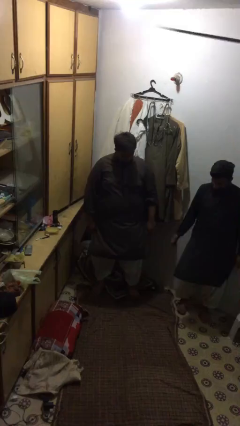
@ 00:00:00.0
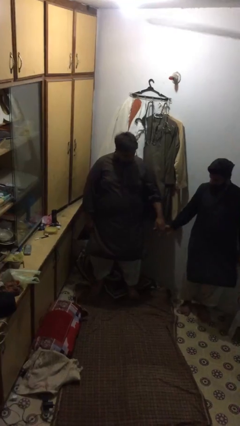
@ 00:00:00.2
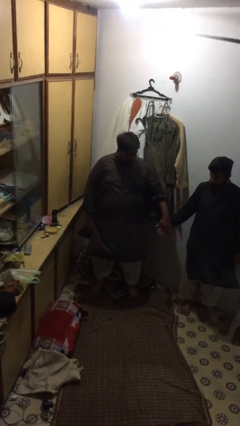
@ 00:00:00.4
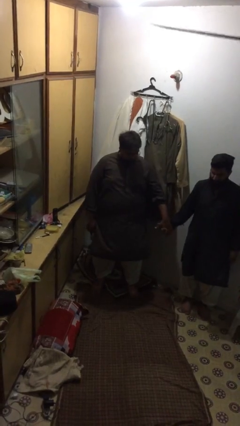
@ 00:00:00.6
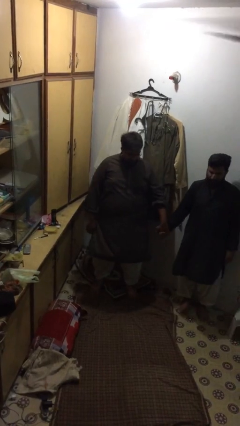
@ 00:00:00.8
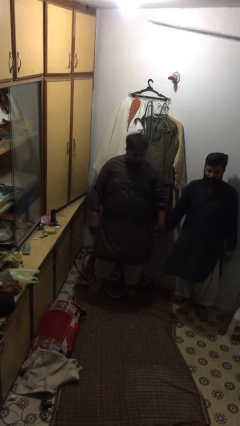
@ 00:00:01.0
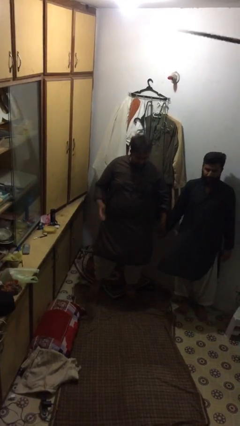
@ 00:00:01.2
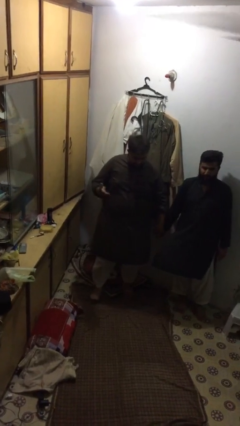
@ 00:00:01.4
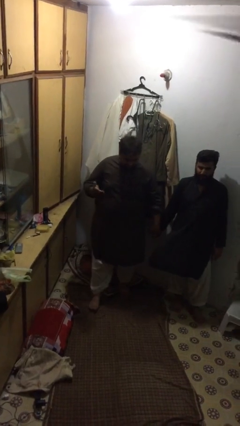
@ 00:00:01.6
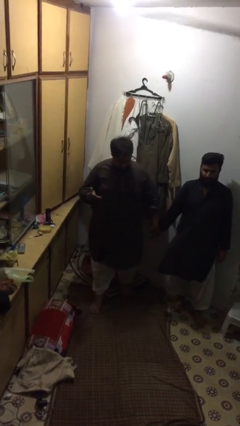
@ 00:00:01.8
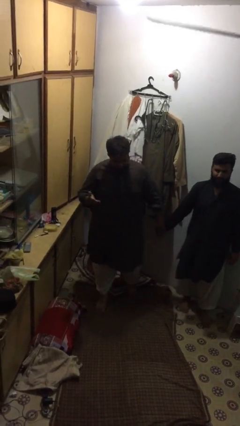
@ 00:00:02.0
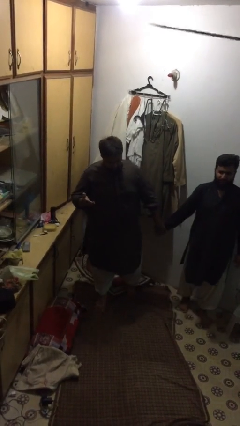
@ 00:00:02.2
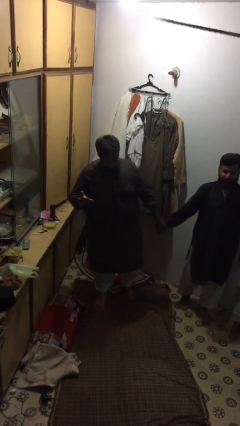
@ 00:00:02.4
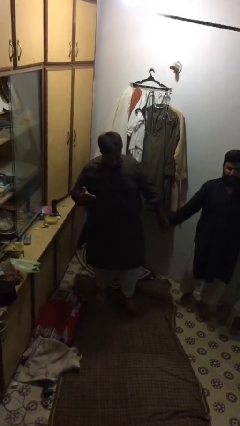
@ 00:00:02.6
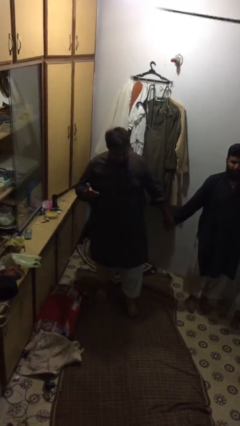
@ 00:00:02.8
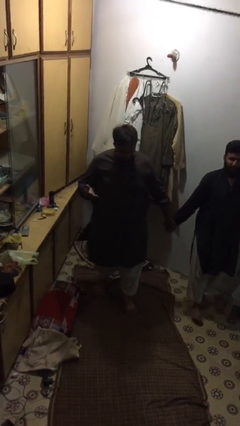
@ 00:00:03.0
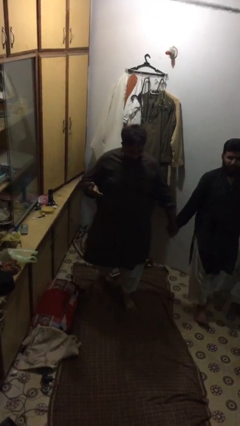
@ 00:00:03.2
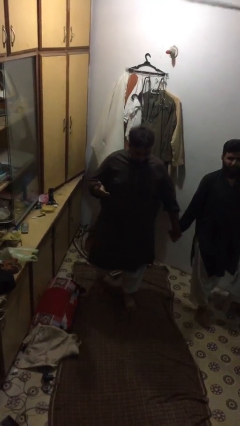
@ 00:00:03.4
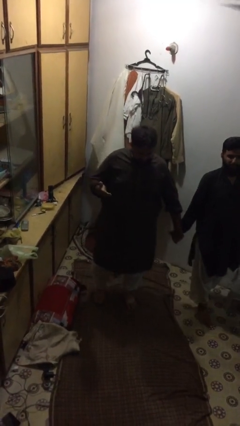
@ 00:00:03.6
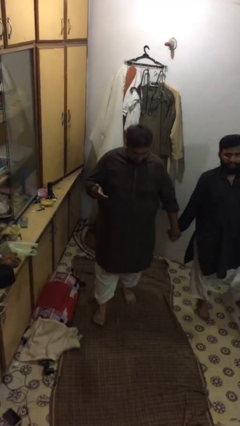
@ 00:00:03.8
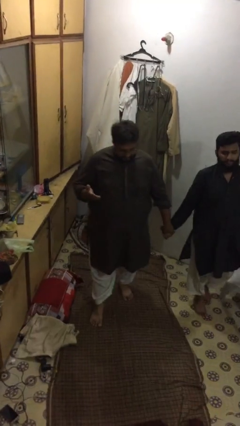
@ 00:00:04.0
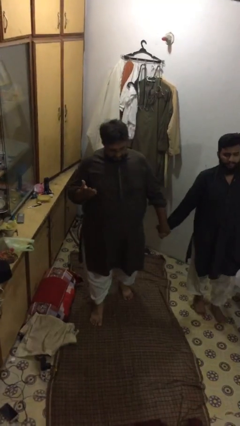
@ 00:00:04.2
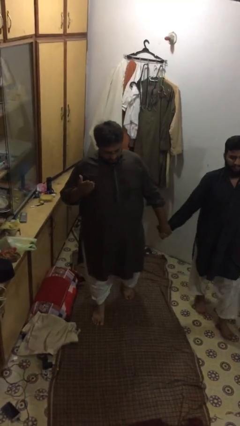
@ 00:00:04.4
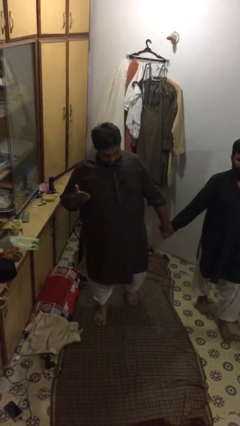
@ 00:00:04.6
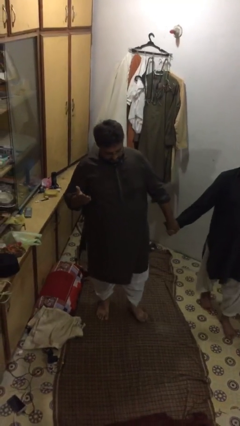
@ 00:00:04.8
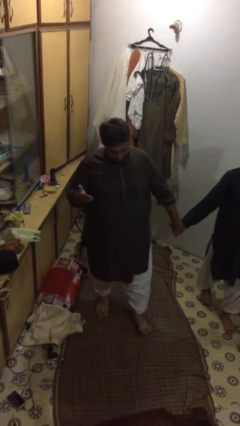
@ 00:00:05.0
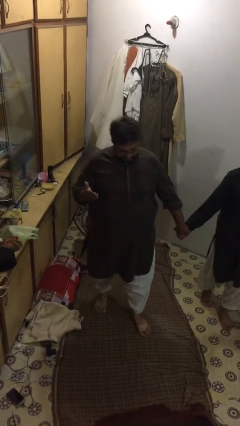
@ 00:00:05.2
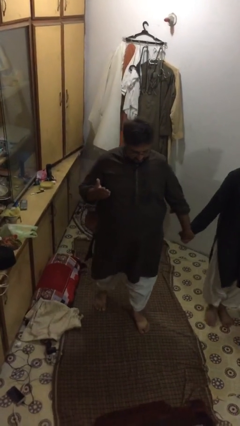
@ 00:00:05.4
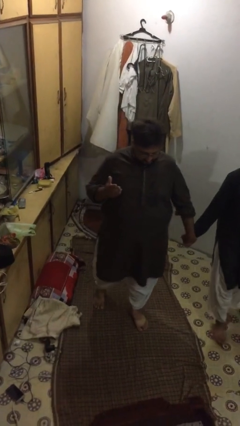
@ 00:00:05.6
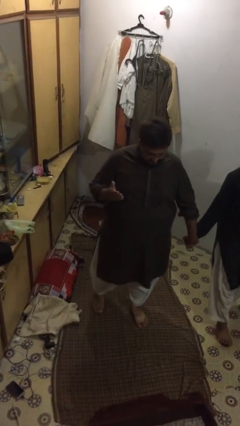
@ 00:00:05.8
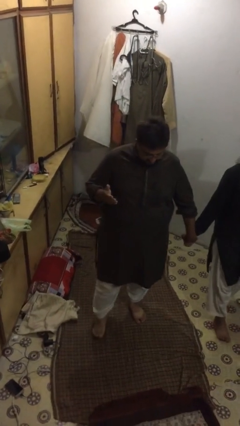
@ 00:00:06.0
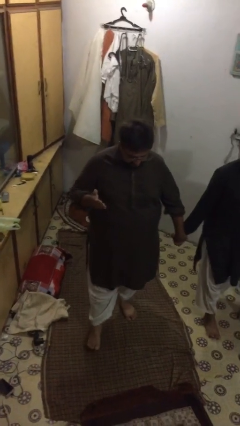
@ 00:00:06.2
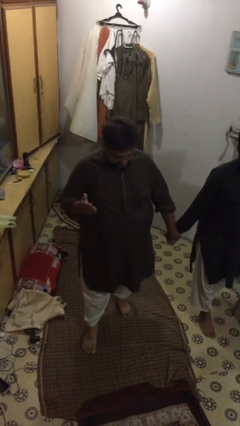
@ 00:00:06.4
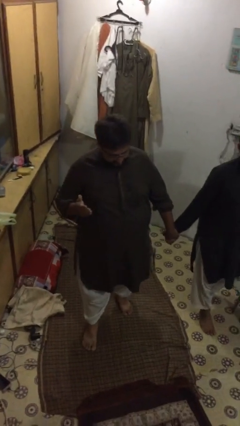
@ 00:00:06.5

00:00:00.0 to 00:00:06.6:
person holds hand

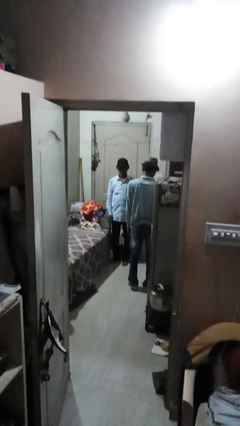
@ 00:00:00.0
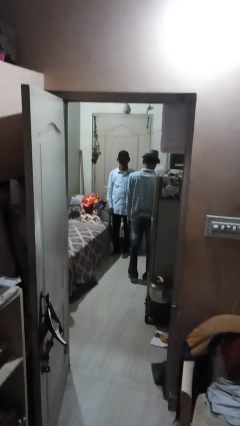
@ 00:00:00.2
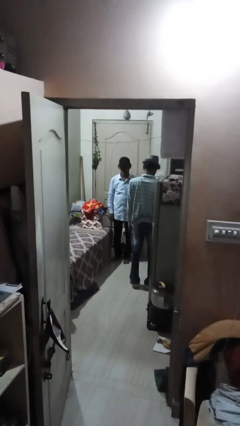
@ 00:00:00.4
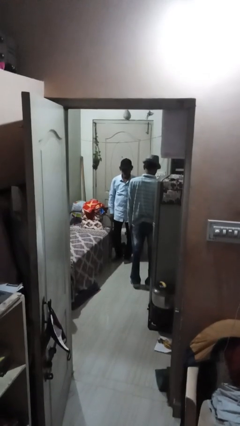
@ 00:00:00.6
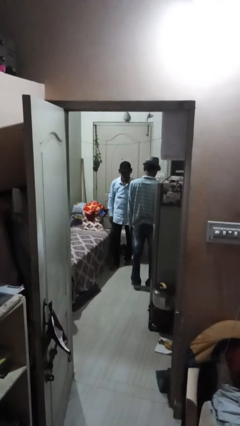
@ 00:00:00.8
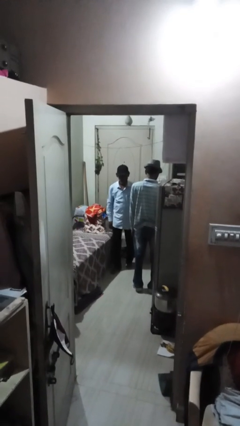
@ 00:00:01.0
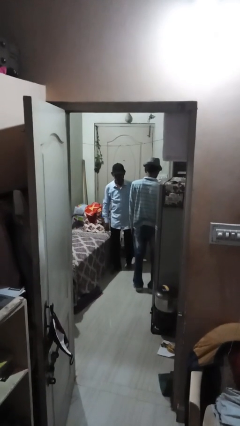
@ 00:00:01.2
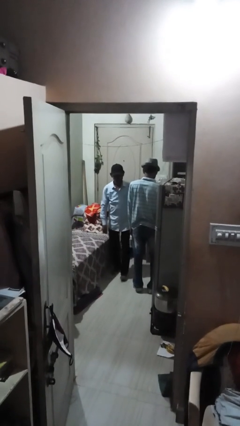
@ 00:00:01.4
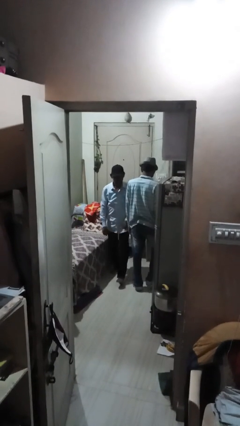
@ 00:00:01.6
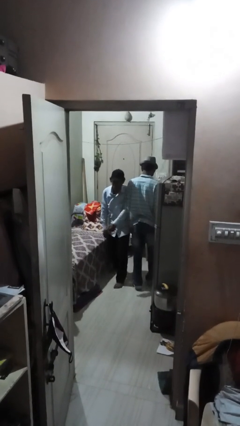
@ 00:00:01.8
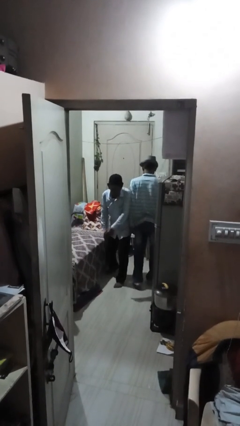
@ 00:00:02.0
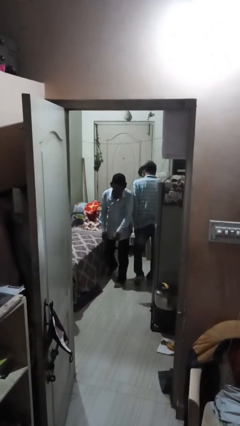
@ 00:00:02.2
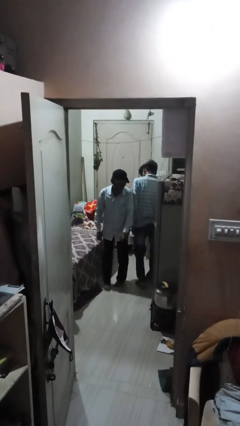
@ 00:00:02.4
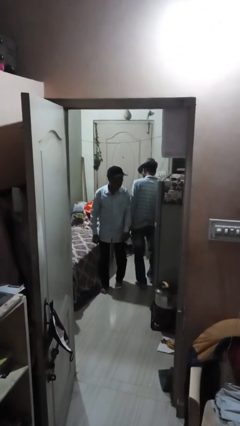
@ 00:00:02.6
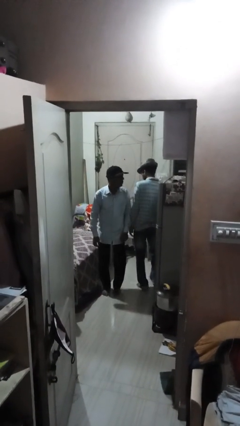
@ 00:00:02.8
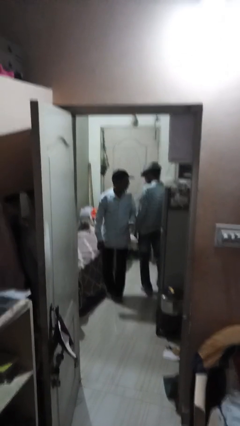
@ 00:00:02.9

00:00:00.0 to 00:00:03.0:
person bumps into person

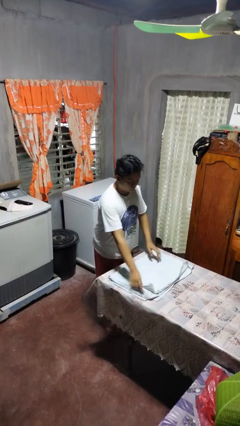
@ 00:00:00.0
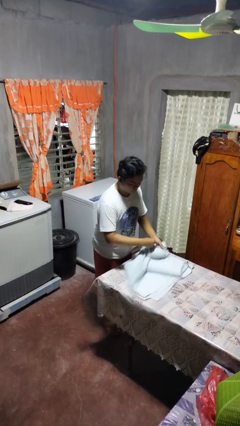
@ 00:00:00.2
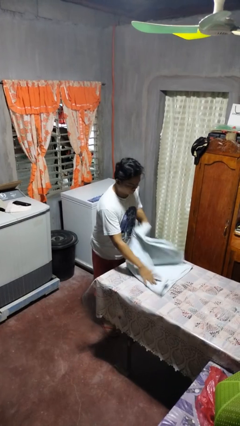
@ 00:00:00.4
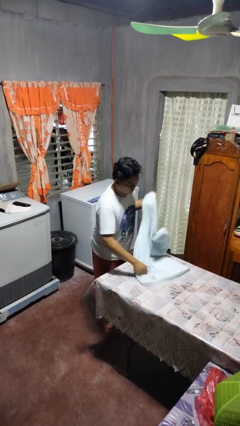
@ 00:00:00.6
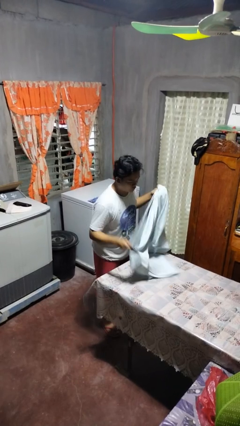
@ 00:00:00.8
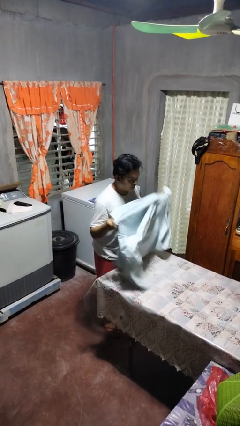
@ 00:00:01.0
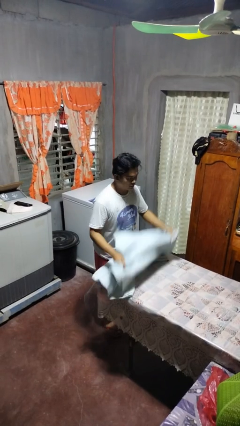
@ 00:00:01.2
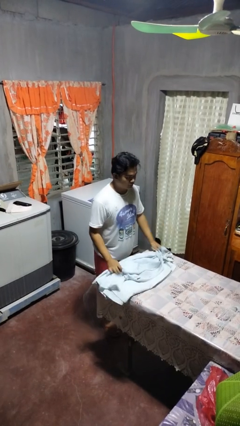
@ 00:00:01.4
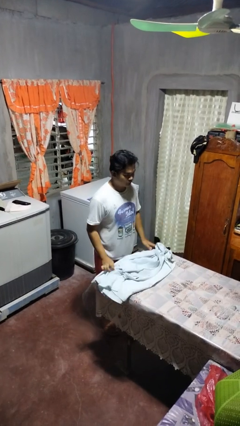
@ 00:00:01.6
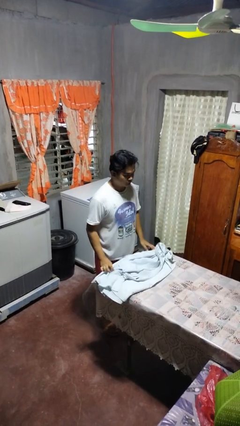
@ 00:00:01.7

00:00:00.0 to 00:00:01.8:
person unfolds blanket

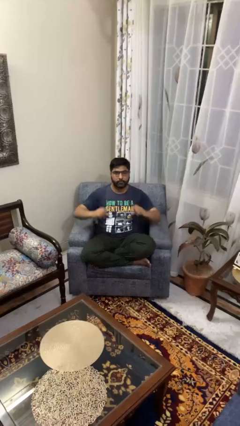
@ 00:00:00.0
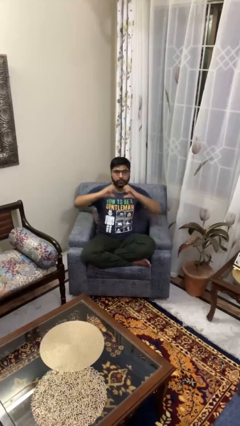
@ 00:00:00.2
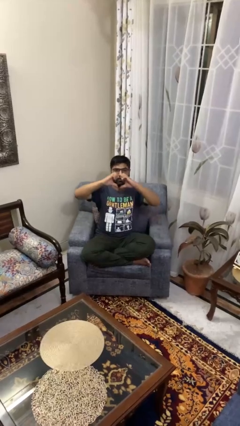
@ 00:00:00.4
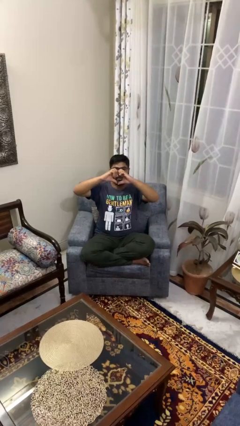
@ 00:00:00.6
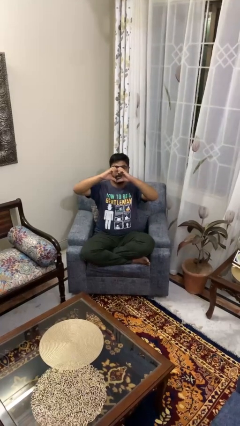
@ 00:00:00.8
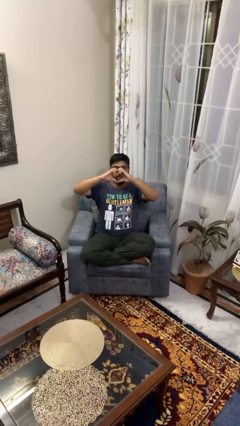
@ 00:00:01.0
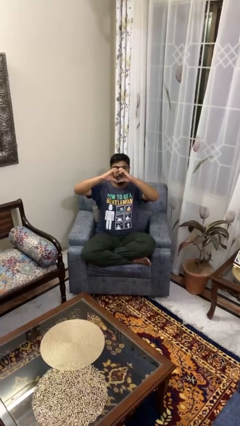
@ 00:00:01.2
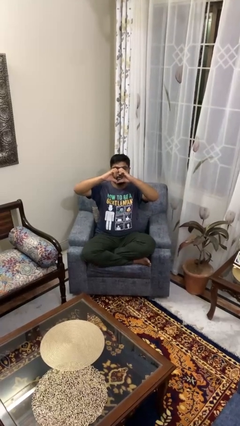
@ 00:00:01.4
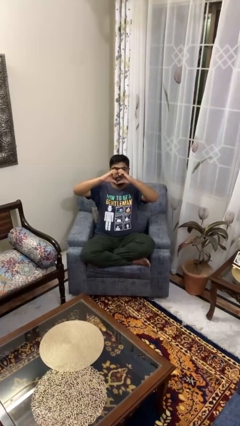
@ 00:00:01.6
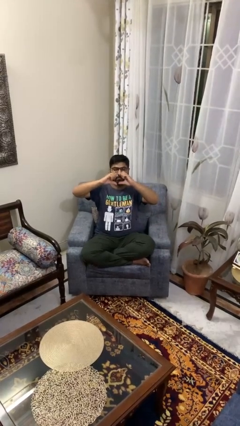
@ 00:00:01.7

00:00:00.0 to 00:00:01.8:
person gestures heart

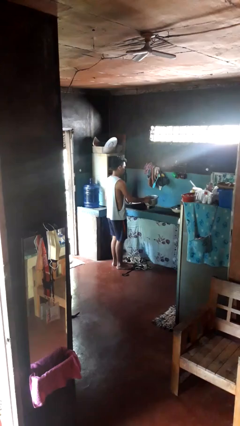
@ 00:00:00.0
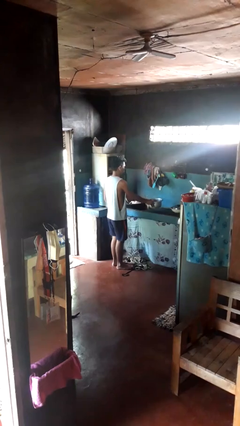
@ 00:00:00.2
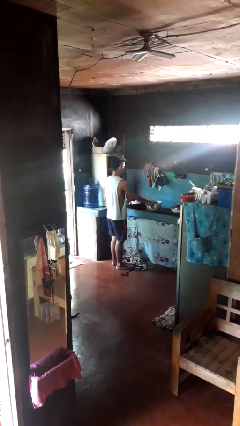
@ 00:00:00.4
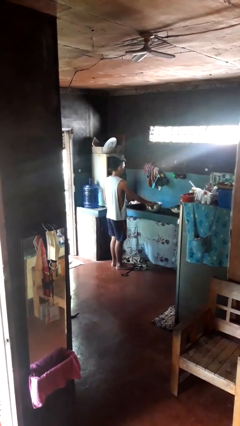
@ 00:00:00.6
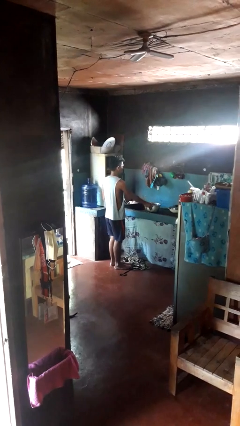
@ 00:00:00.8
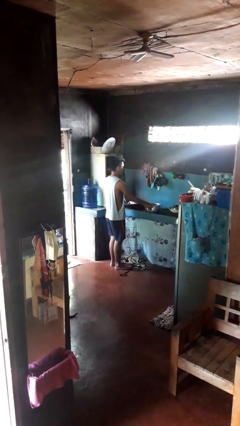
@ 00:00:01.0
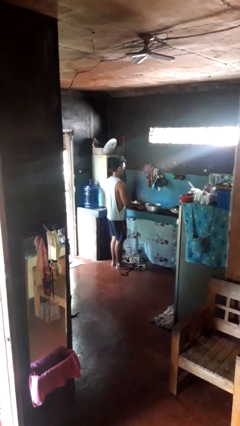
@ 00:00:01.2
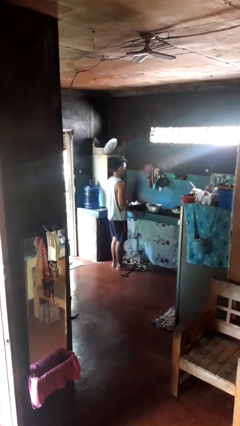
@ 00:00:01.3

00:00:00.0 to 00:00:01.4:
person puts down object on countertop

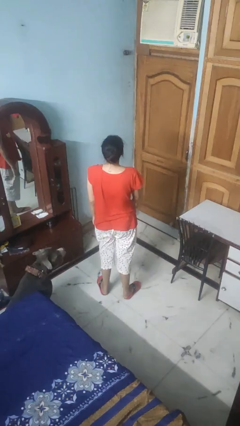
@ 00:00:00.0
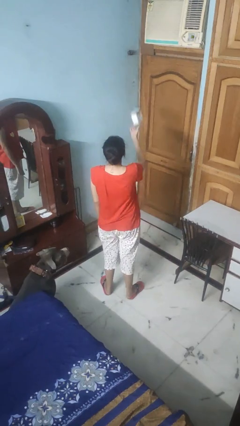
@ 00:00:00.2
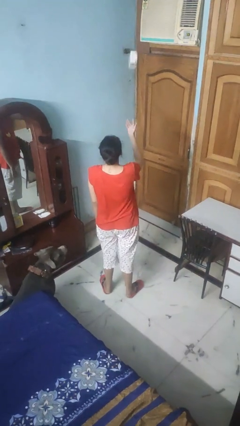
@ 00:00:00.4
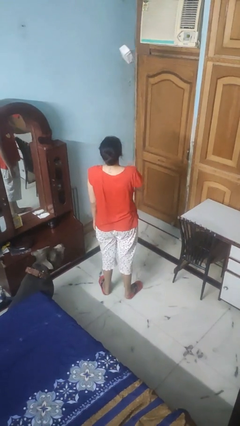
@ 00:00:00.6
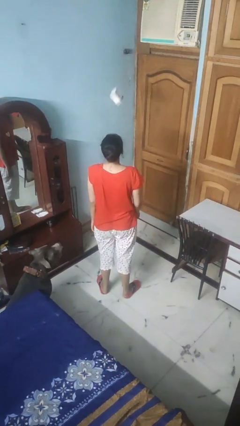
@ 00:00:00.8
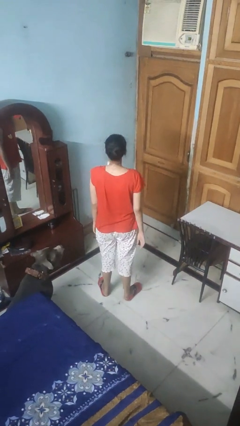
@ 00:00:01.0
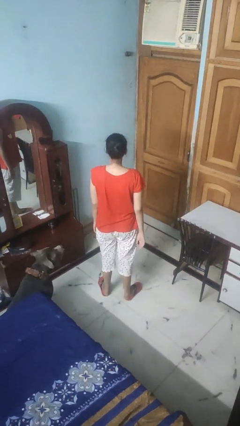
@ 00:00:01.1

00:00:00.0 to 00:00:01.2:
person throws object into air

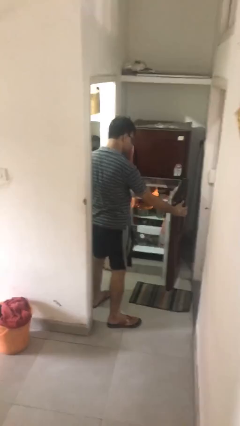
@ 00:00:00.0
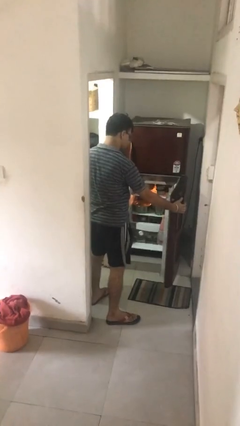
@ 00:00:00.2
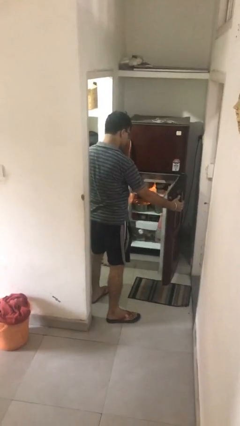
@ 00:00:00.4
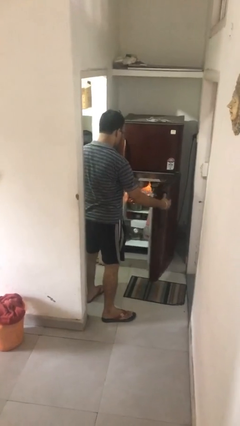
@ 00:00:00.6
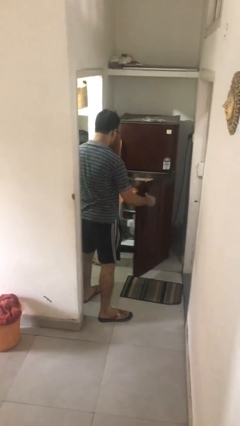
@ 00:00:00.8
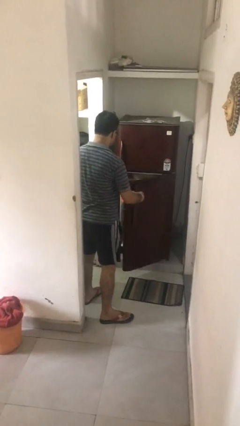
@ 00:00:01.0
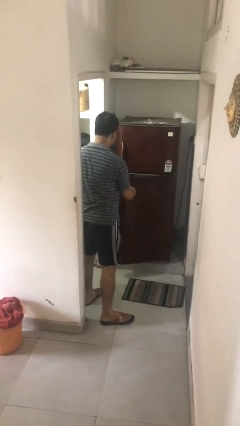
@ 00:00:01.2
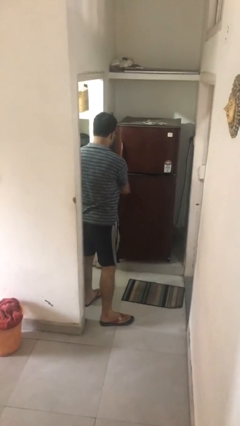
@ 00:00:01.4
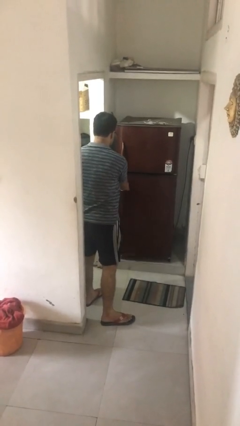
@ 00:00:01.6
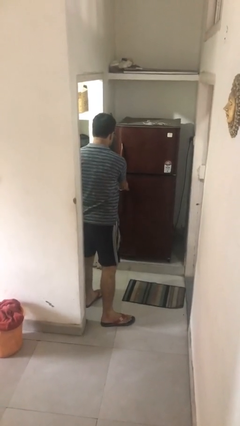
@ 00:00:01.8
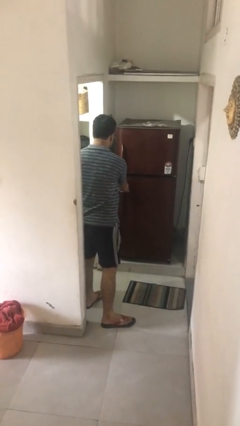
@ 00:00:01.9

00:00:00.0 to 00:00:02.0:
person closes refrigerator
